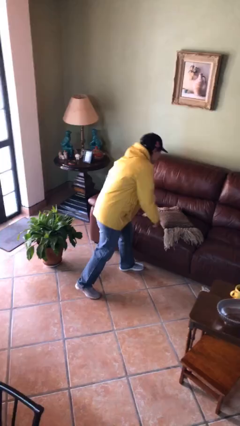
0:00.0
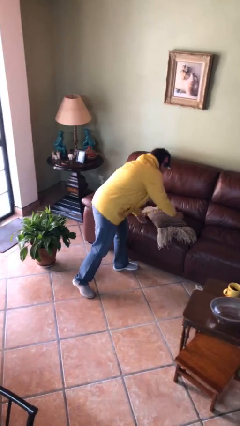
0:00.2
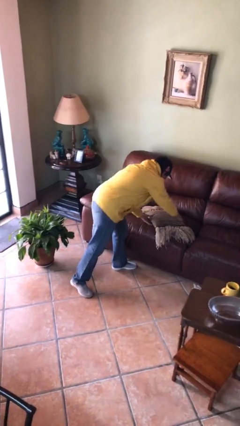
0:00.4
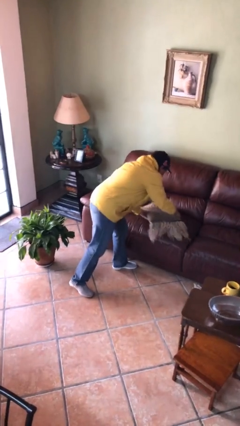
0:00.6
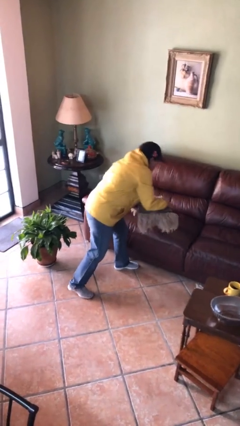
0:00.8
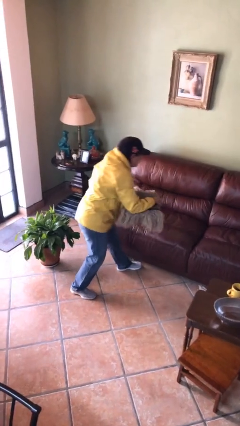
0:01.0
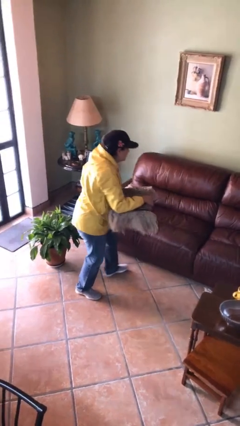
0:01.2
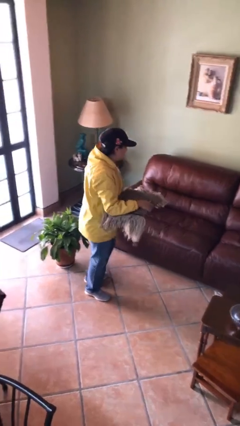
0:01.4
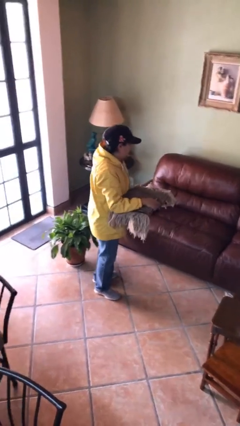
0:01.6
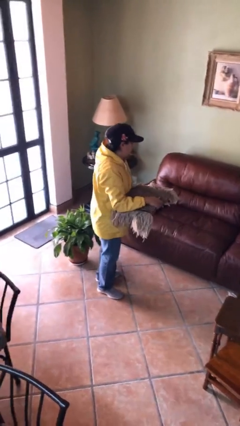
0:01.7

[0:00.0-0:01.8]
person picks up object from couch

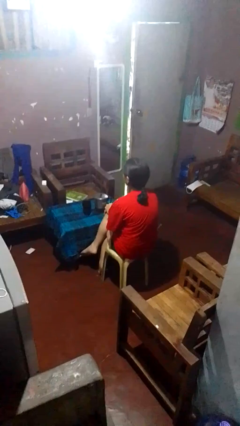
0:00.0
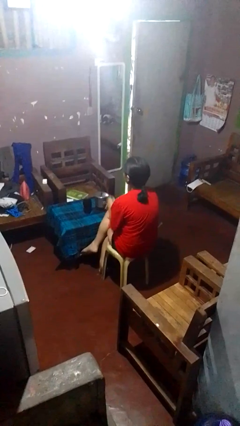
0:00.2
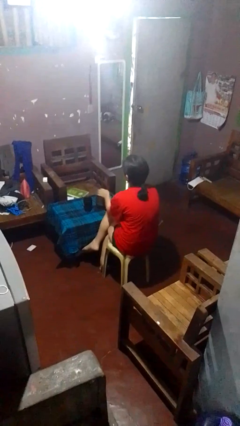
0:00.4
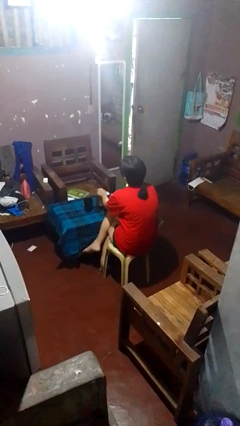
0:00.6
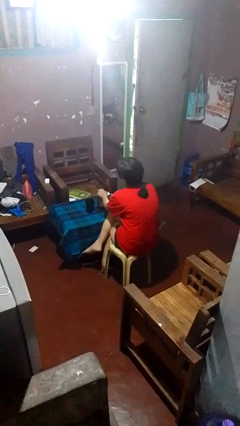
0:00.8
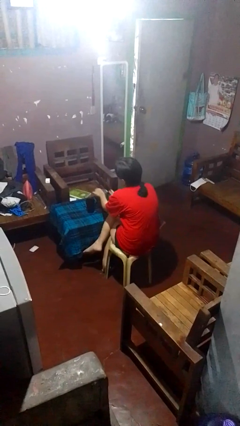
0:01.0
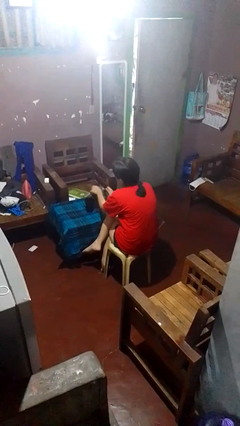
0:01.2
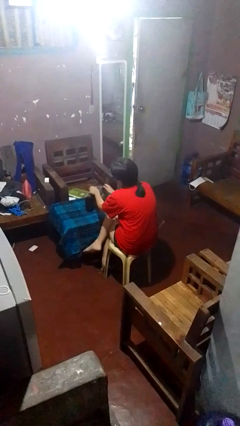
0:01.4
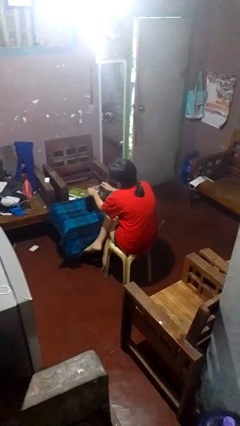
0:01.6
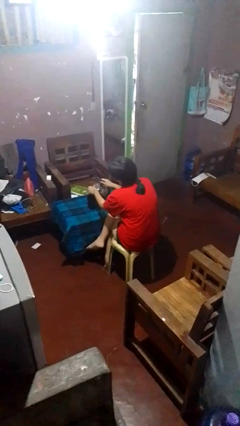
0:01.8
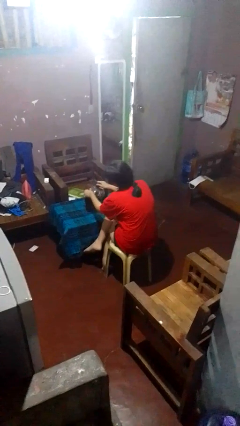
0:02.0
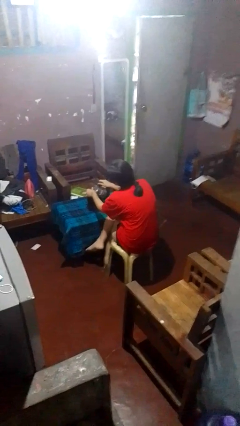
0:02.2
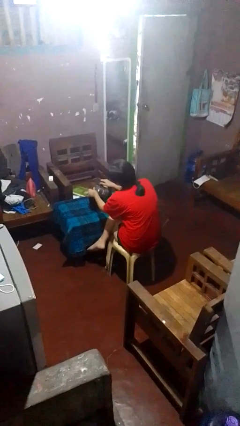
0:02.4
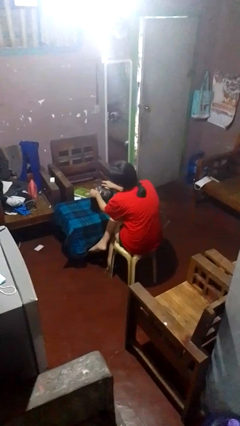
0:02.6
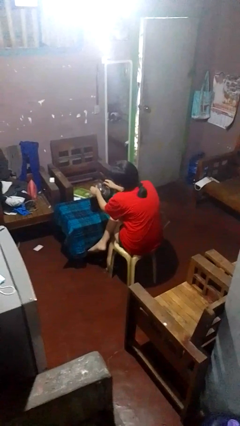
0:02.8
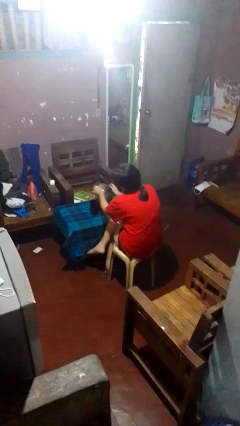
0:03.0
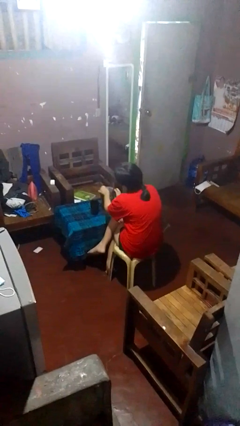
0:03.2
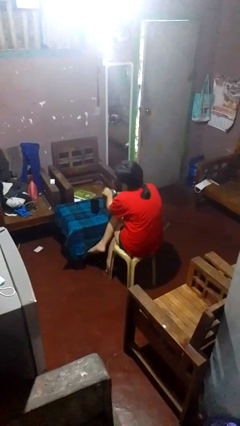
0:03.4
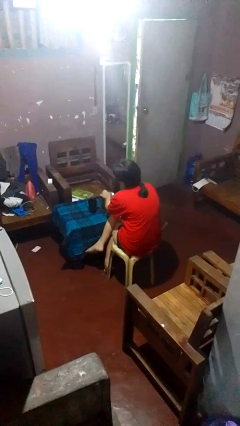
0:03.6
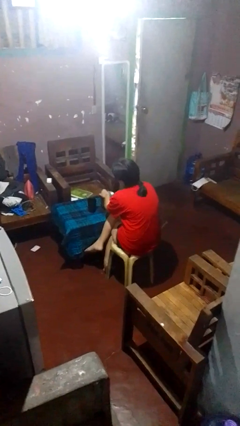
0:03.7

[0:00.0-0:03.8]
person pours coffee into mug

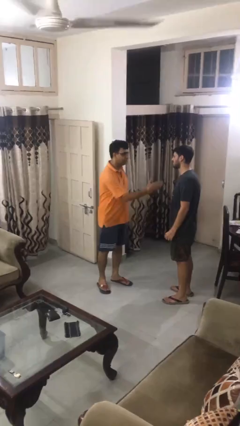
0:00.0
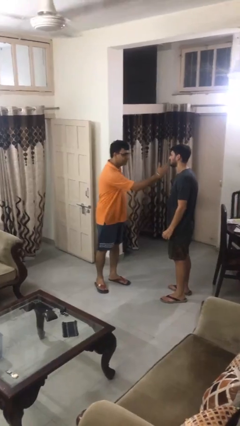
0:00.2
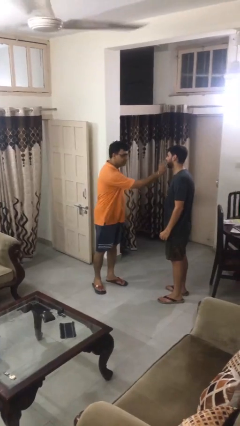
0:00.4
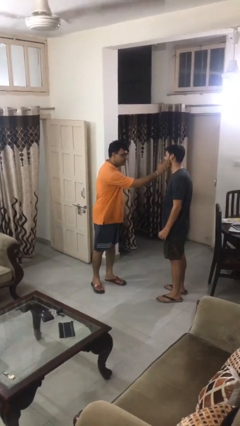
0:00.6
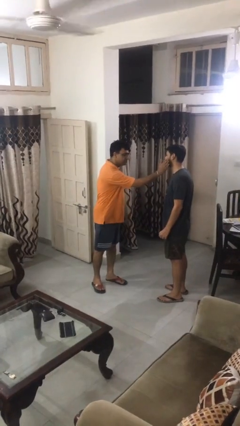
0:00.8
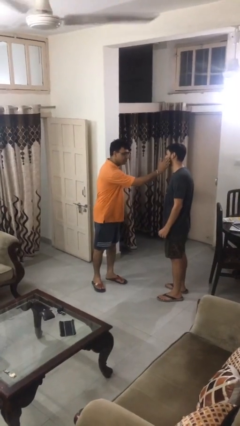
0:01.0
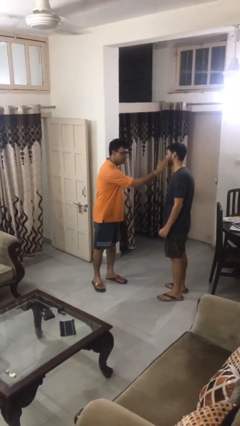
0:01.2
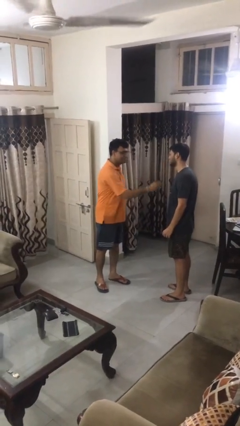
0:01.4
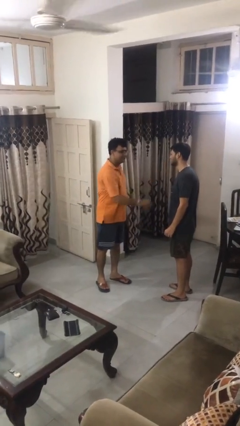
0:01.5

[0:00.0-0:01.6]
person touches face of person

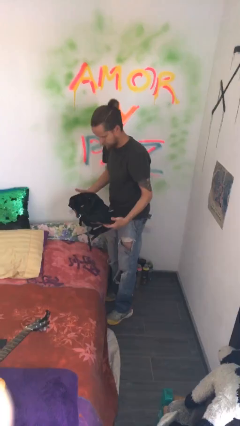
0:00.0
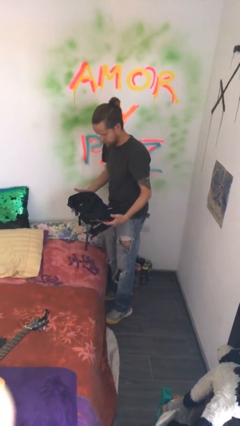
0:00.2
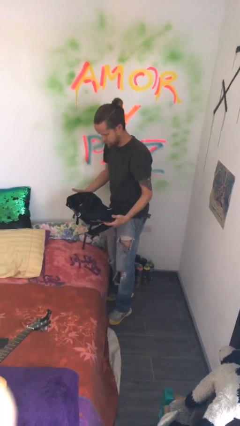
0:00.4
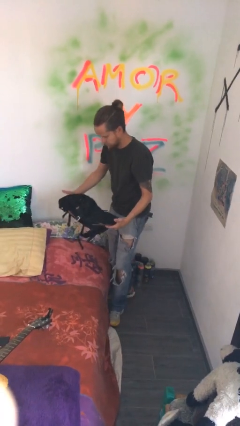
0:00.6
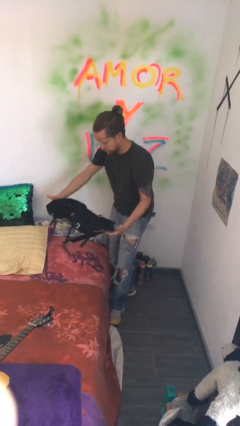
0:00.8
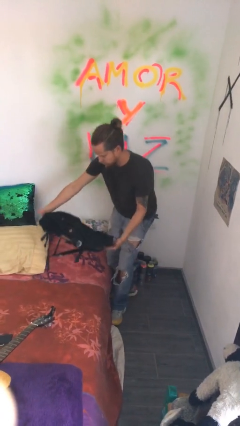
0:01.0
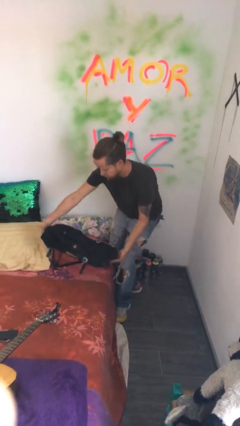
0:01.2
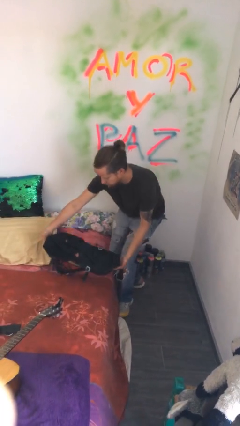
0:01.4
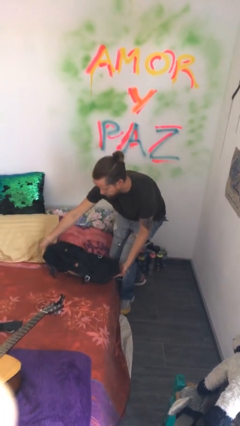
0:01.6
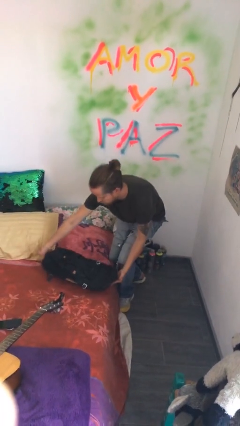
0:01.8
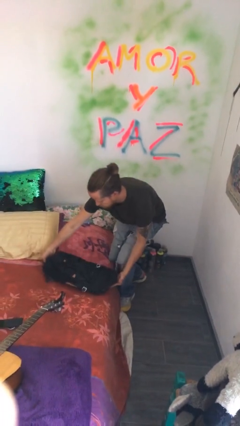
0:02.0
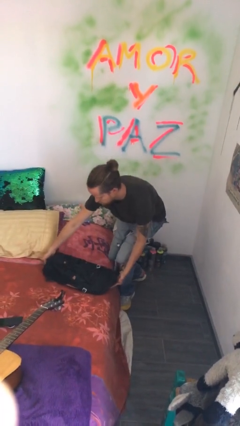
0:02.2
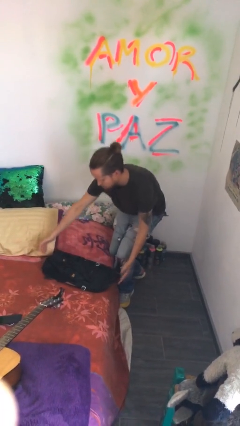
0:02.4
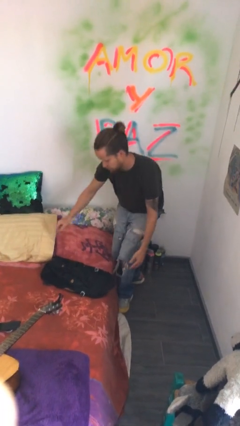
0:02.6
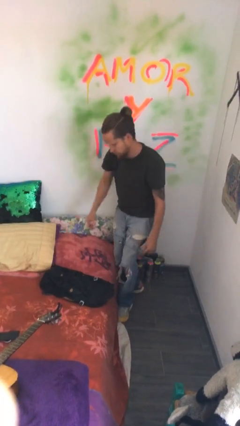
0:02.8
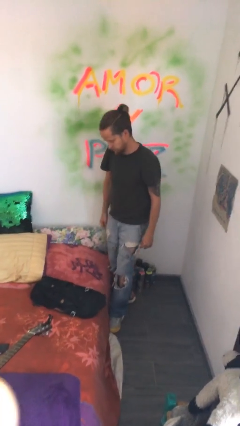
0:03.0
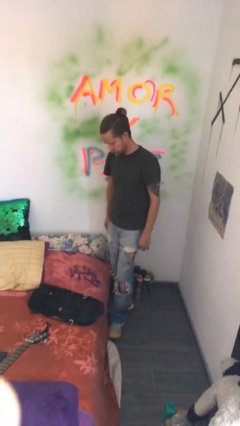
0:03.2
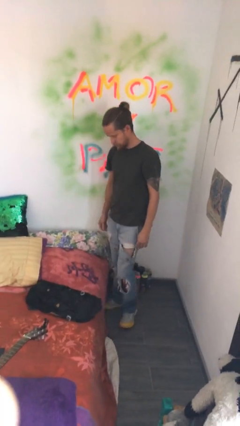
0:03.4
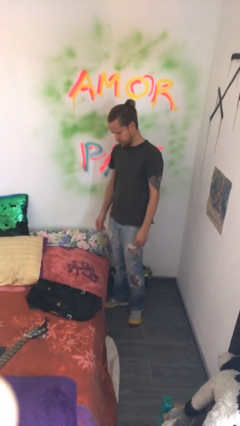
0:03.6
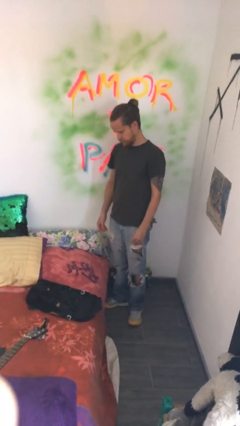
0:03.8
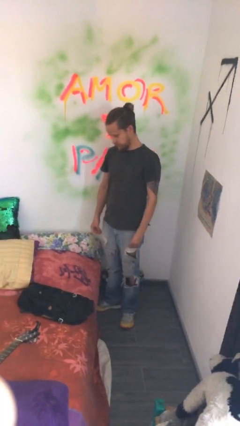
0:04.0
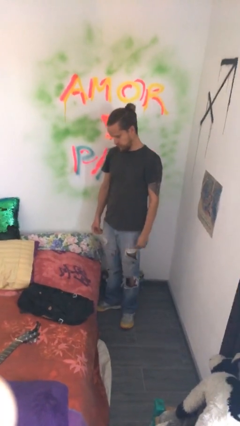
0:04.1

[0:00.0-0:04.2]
person puts down object on bed

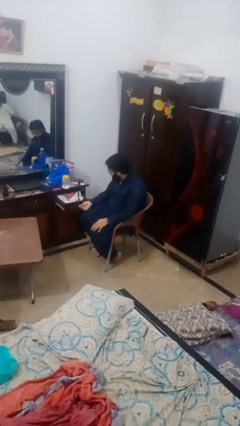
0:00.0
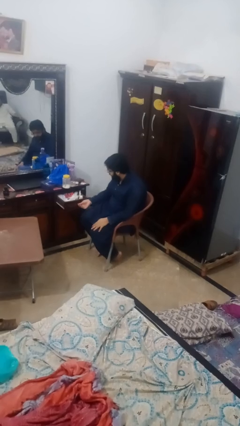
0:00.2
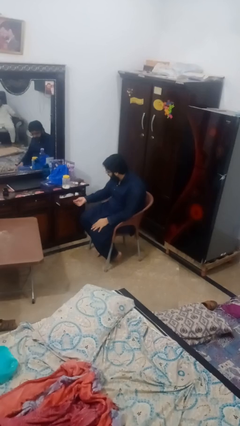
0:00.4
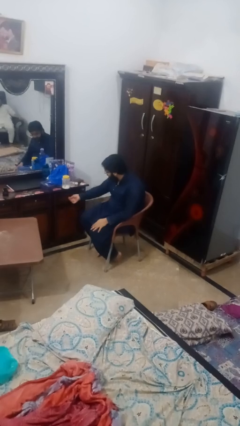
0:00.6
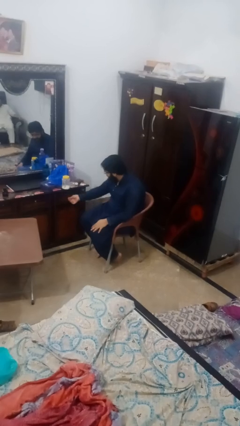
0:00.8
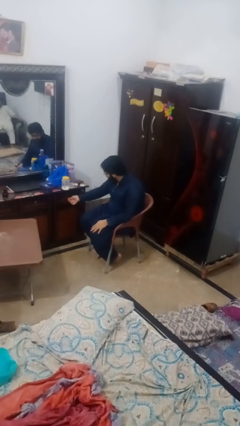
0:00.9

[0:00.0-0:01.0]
person closes dresser drawer

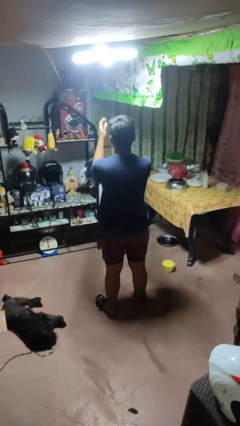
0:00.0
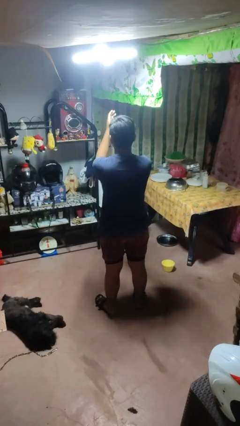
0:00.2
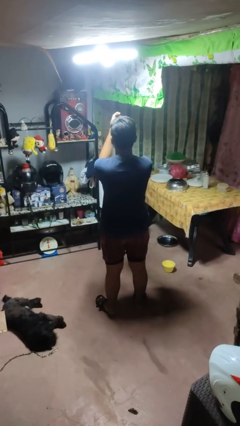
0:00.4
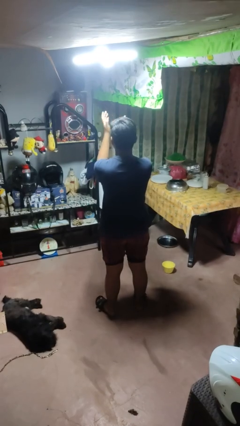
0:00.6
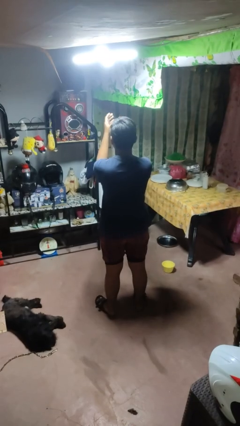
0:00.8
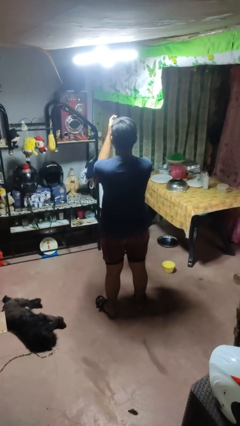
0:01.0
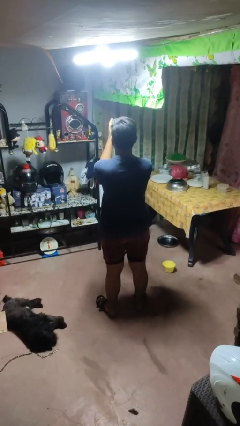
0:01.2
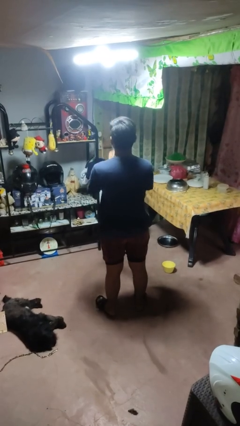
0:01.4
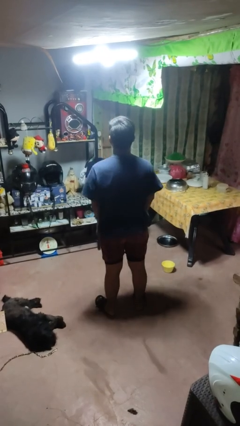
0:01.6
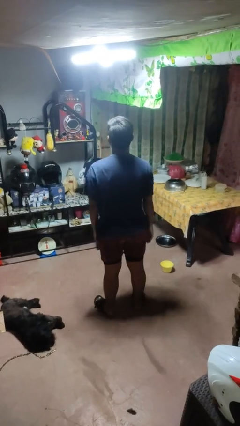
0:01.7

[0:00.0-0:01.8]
person claps hands

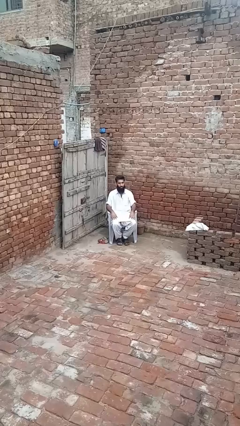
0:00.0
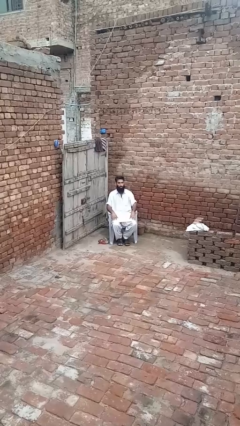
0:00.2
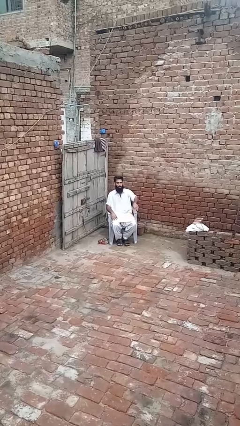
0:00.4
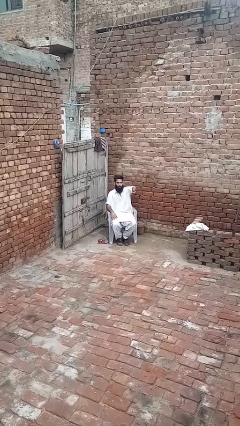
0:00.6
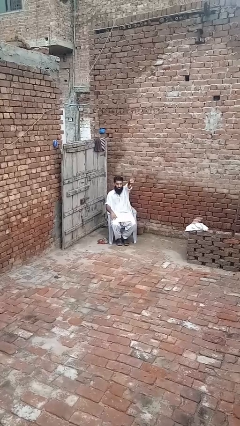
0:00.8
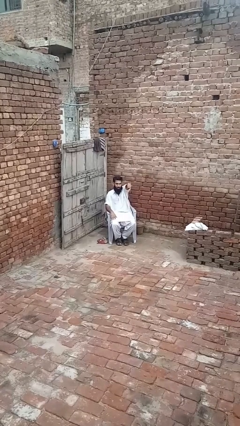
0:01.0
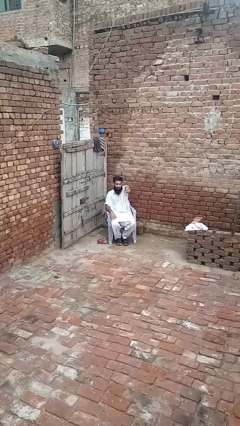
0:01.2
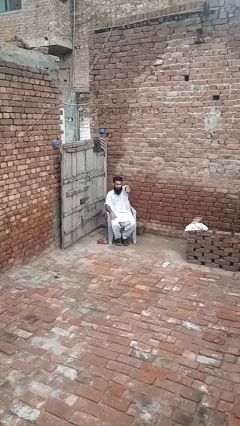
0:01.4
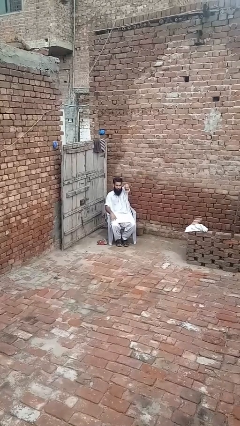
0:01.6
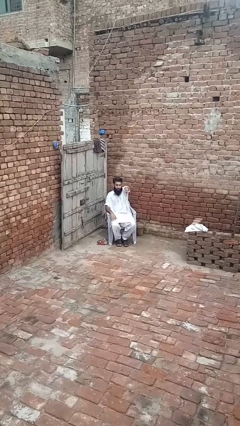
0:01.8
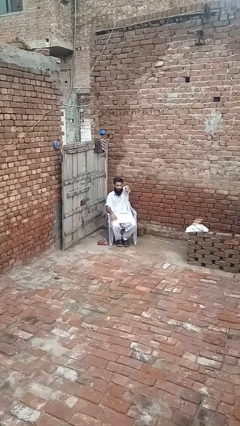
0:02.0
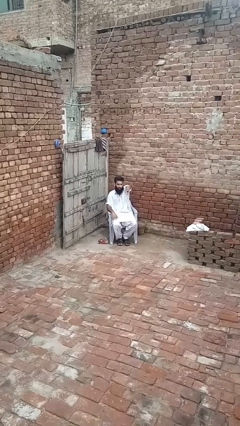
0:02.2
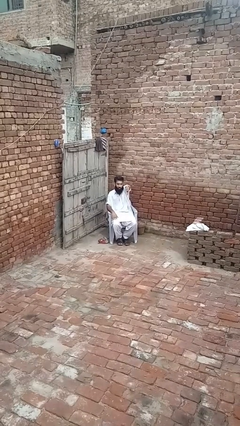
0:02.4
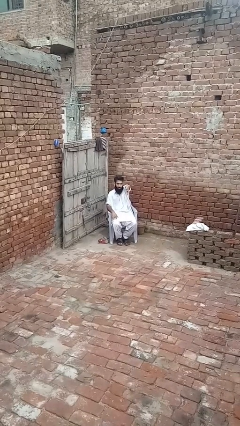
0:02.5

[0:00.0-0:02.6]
person gestures thumbs down
